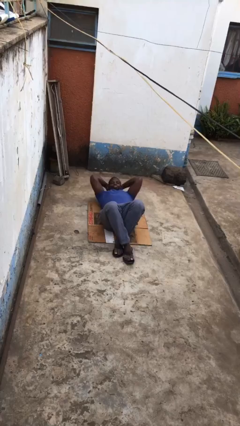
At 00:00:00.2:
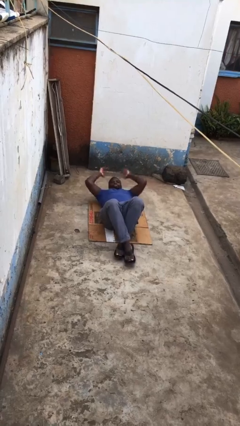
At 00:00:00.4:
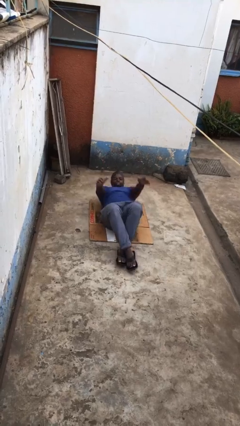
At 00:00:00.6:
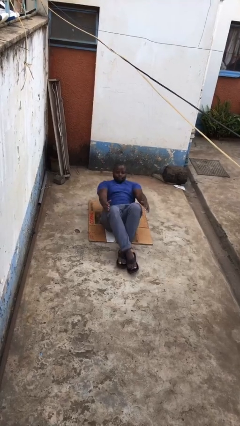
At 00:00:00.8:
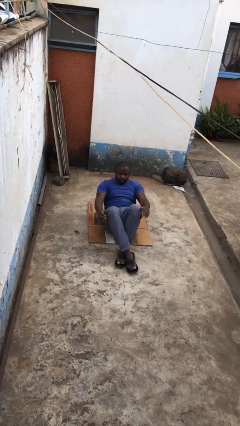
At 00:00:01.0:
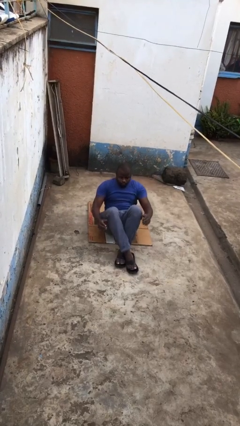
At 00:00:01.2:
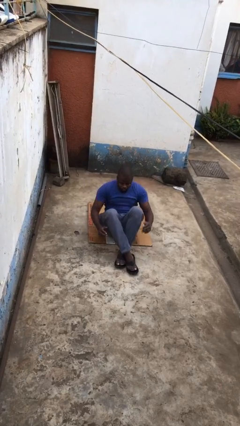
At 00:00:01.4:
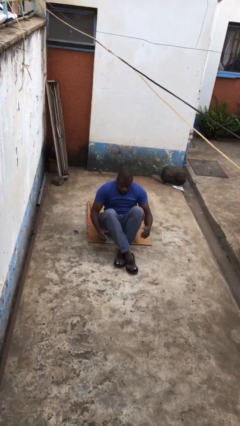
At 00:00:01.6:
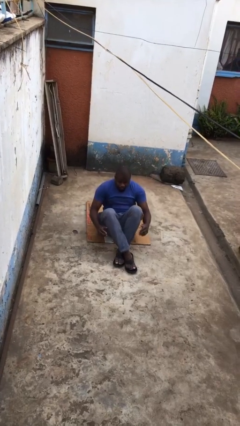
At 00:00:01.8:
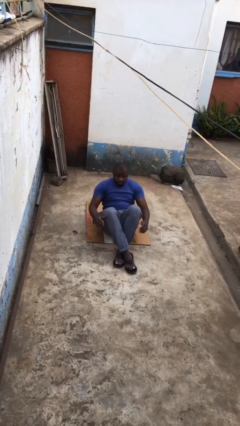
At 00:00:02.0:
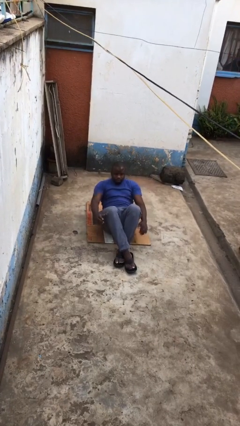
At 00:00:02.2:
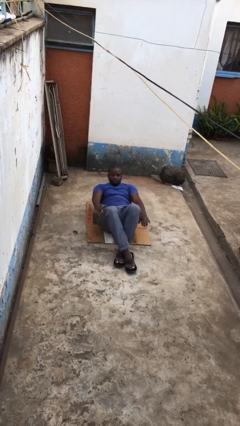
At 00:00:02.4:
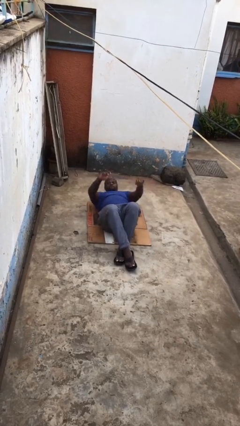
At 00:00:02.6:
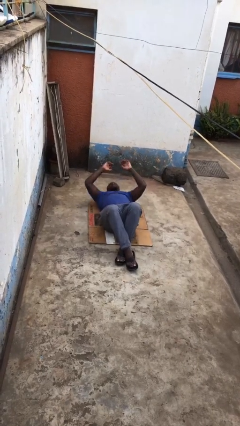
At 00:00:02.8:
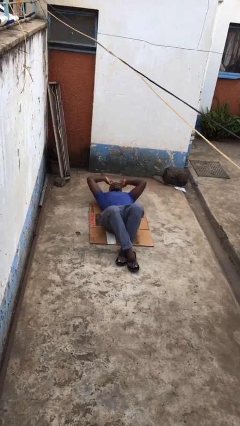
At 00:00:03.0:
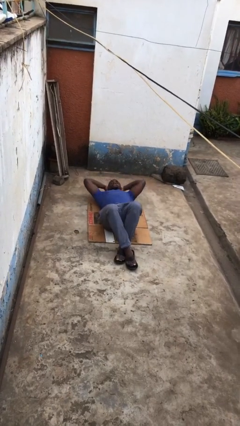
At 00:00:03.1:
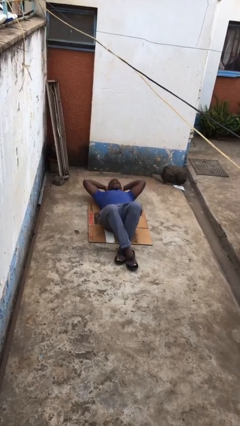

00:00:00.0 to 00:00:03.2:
person exercises with situp

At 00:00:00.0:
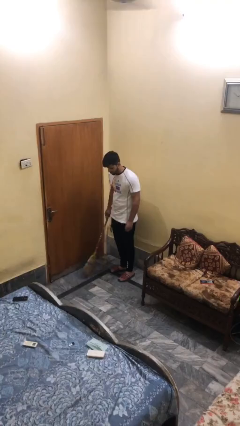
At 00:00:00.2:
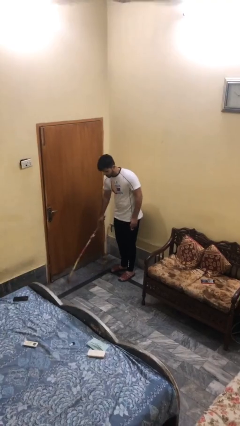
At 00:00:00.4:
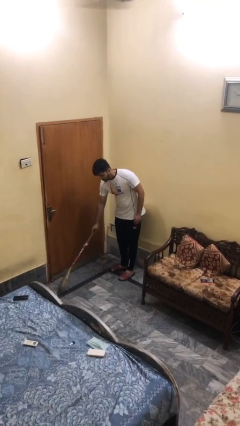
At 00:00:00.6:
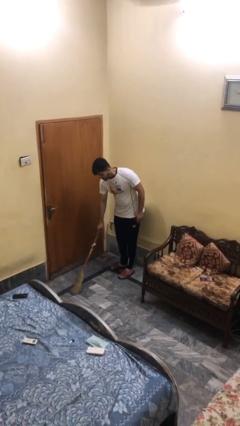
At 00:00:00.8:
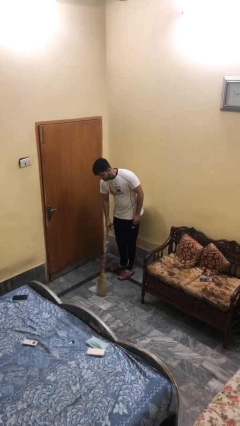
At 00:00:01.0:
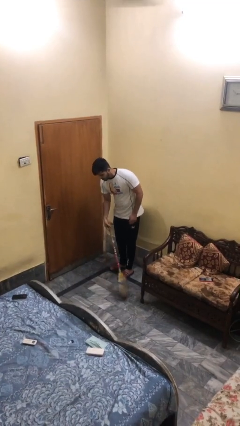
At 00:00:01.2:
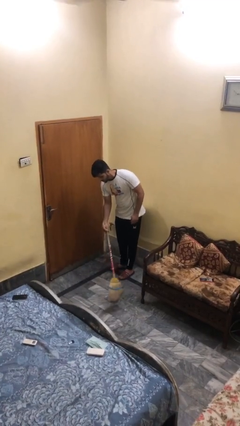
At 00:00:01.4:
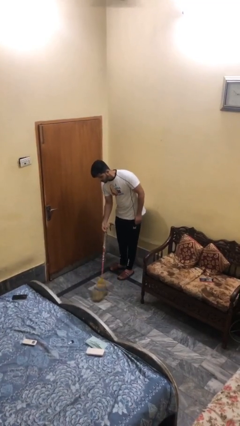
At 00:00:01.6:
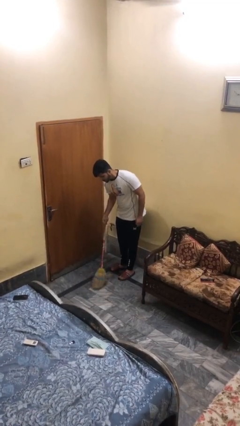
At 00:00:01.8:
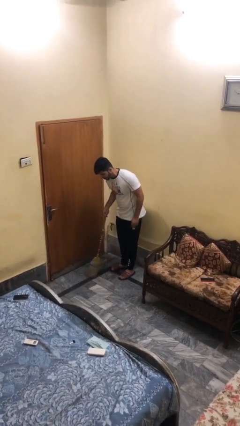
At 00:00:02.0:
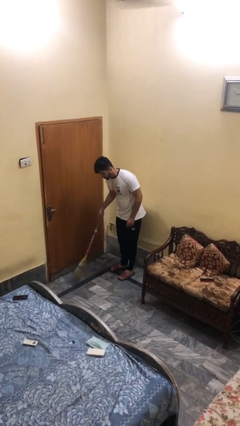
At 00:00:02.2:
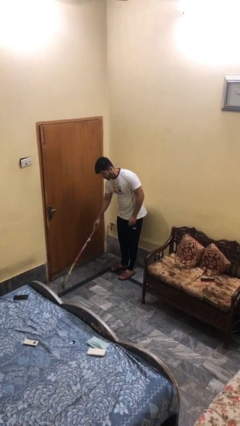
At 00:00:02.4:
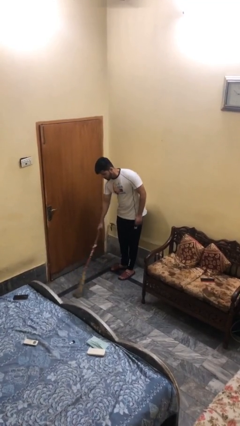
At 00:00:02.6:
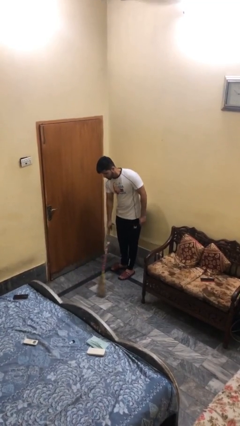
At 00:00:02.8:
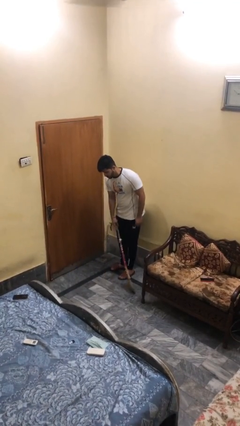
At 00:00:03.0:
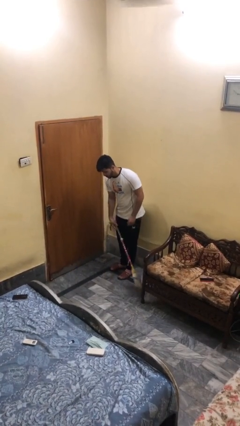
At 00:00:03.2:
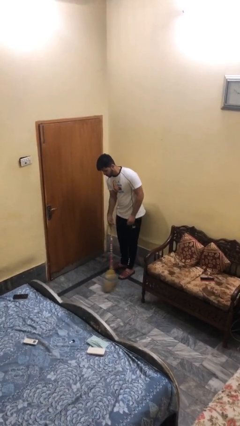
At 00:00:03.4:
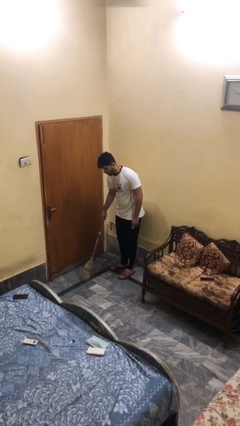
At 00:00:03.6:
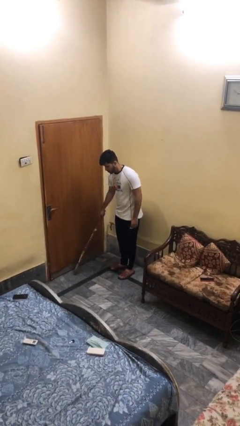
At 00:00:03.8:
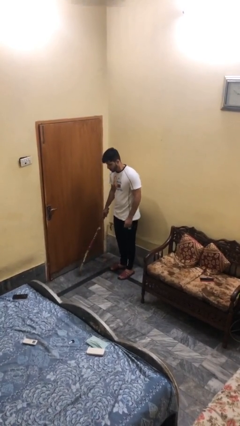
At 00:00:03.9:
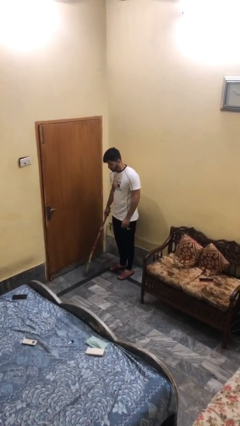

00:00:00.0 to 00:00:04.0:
person sweeps floor

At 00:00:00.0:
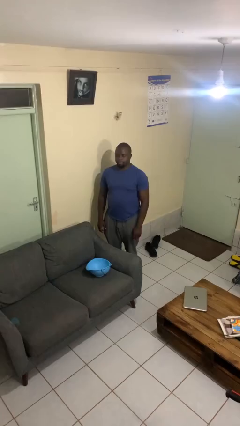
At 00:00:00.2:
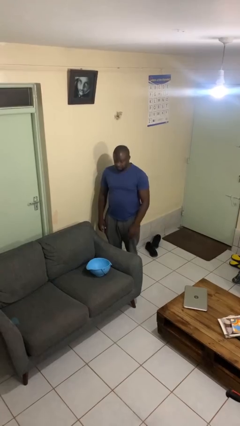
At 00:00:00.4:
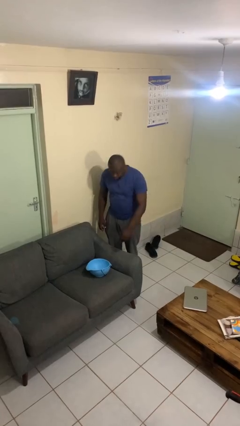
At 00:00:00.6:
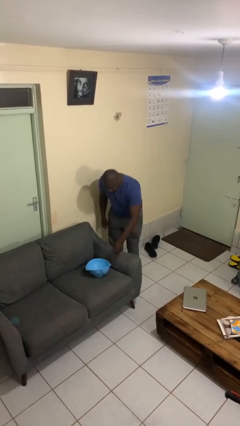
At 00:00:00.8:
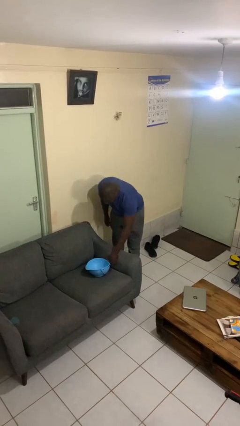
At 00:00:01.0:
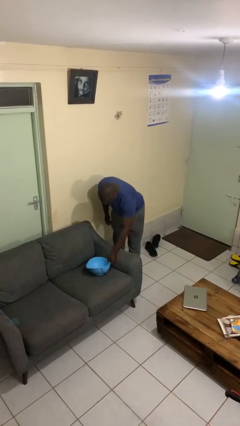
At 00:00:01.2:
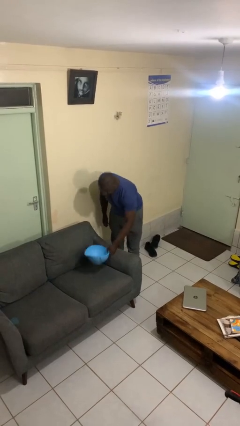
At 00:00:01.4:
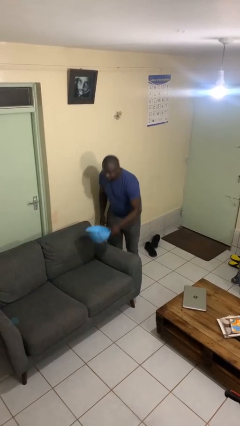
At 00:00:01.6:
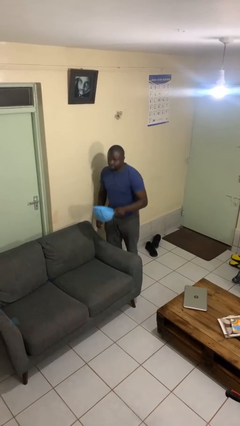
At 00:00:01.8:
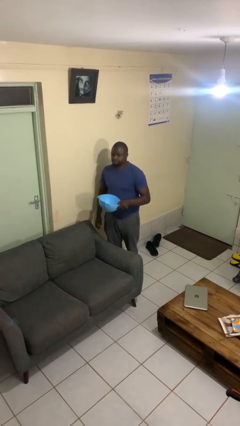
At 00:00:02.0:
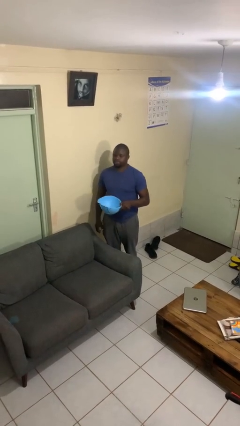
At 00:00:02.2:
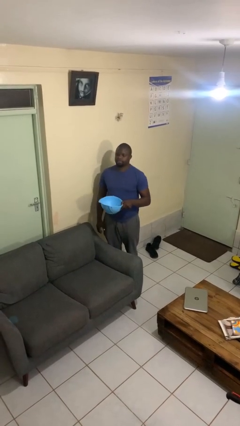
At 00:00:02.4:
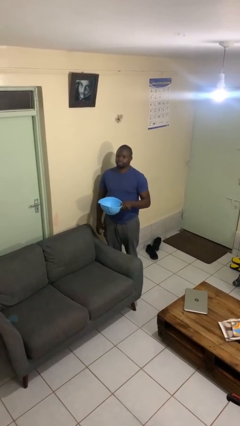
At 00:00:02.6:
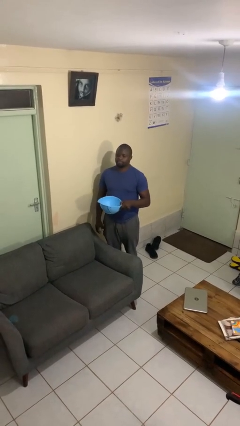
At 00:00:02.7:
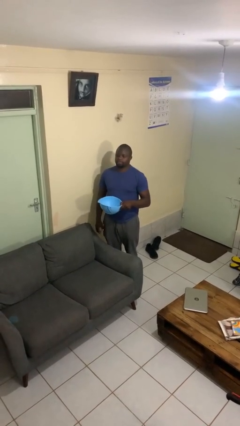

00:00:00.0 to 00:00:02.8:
person picks up object from couch

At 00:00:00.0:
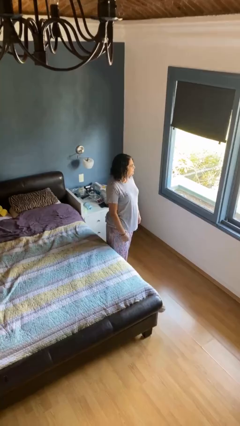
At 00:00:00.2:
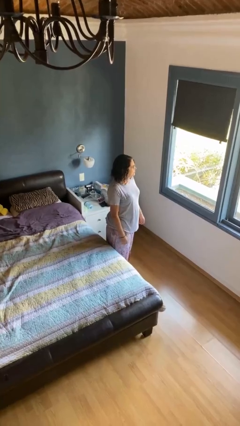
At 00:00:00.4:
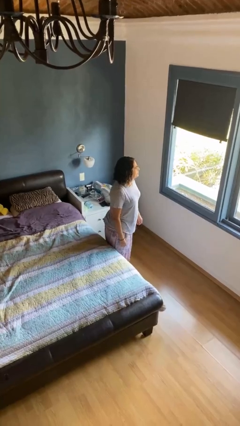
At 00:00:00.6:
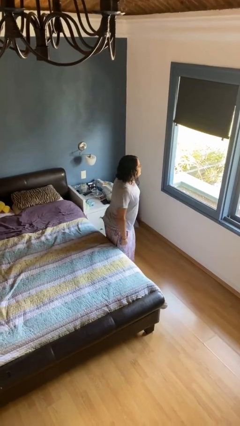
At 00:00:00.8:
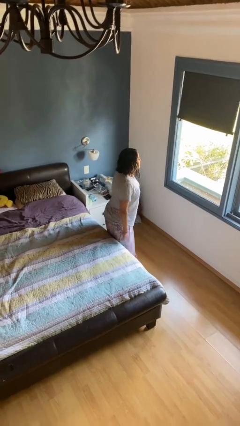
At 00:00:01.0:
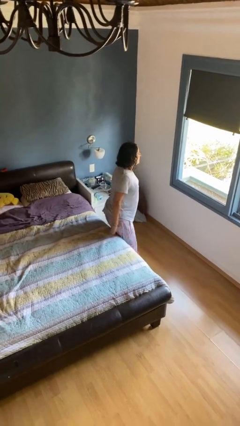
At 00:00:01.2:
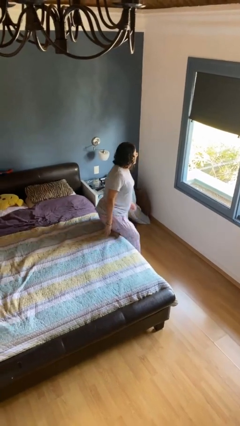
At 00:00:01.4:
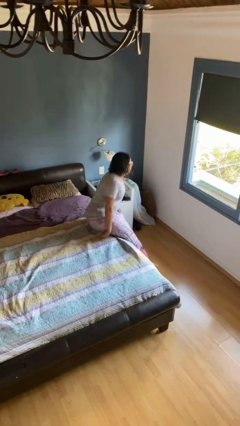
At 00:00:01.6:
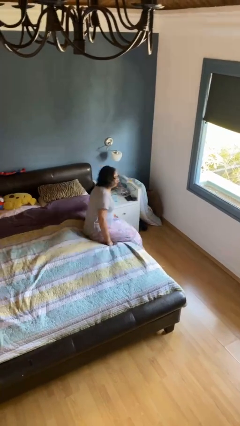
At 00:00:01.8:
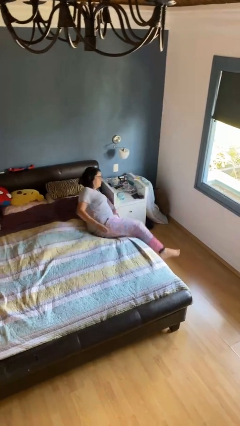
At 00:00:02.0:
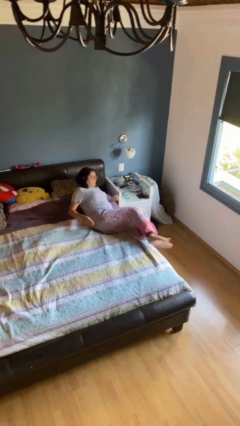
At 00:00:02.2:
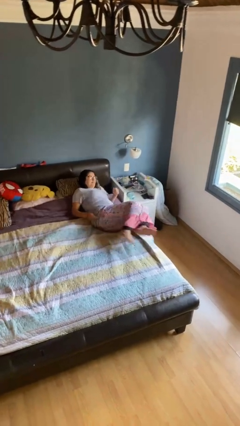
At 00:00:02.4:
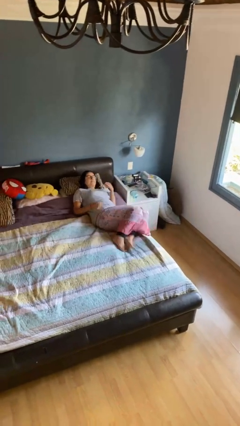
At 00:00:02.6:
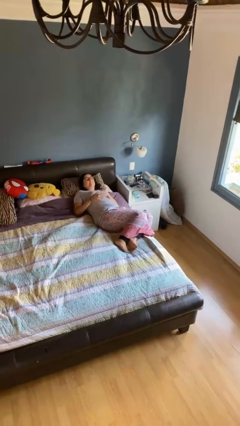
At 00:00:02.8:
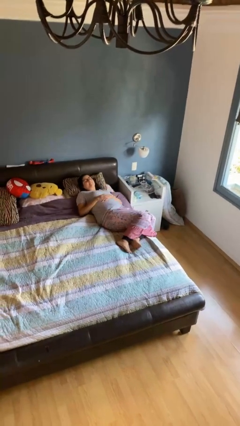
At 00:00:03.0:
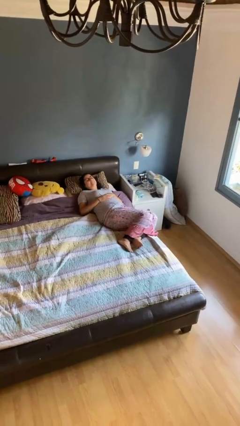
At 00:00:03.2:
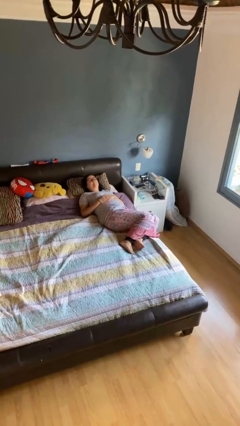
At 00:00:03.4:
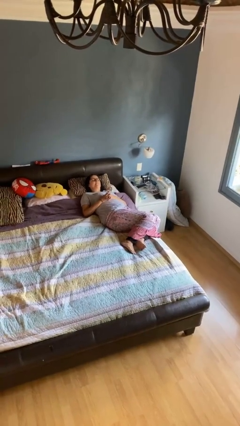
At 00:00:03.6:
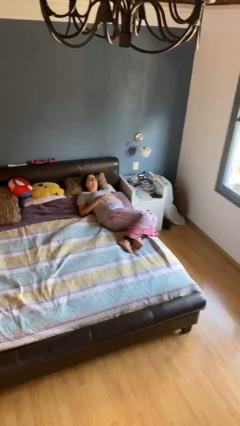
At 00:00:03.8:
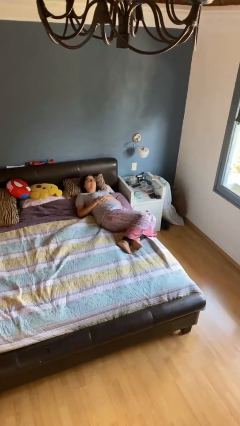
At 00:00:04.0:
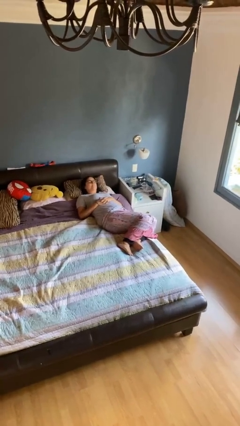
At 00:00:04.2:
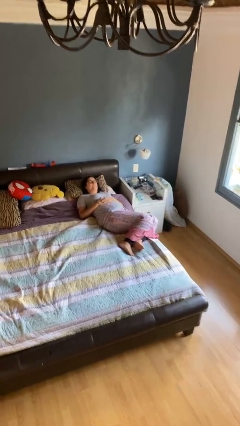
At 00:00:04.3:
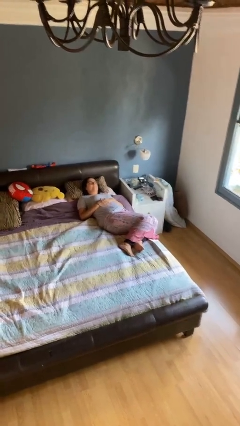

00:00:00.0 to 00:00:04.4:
person lies down on bed

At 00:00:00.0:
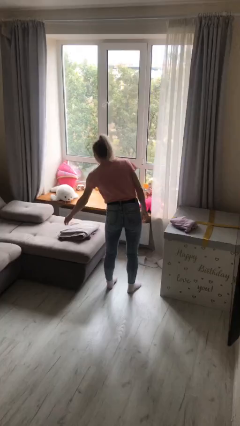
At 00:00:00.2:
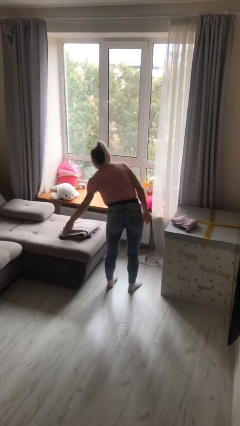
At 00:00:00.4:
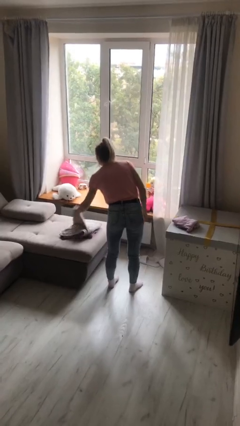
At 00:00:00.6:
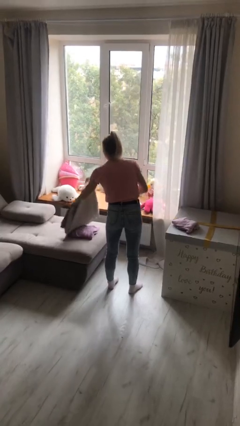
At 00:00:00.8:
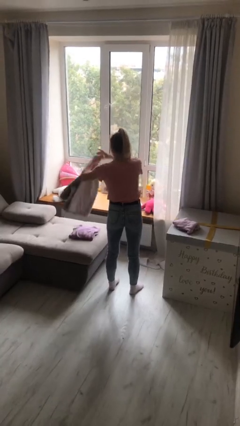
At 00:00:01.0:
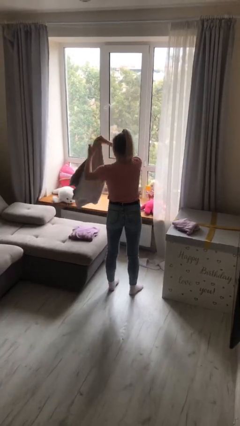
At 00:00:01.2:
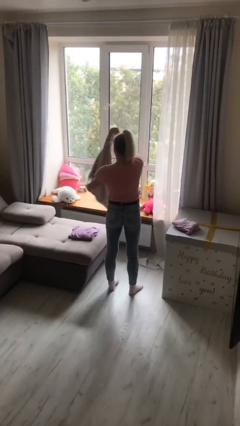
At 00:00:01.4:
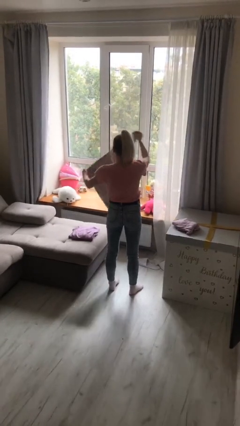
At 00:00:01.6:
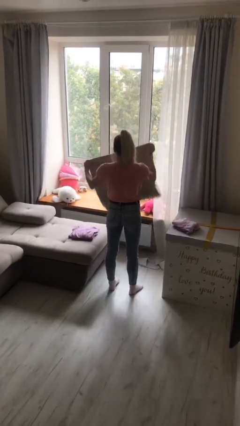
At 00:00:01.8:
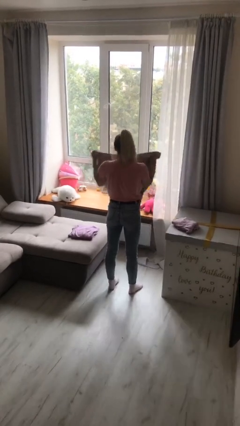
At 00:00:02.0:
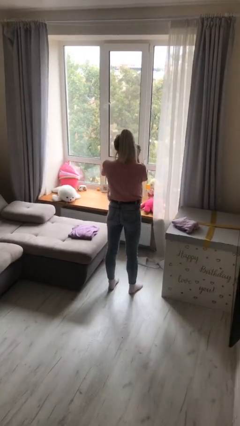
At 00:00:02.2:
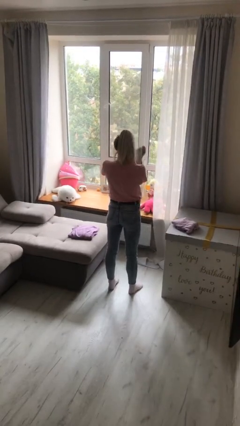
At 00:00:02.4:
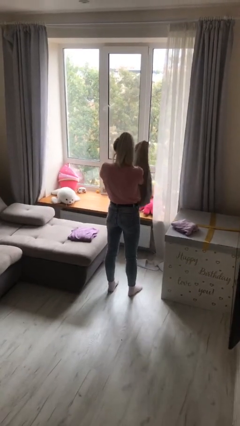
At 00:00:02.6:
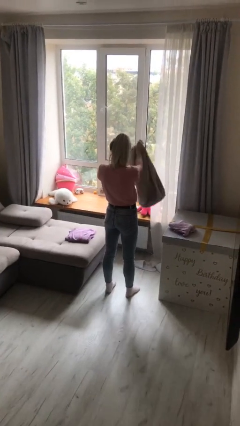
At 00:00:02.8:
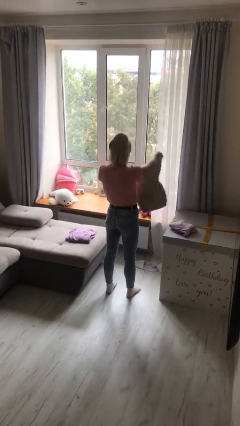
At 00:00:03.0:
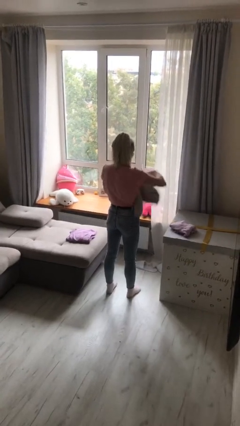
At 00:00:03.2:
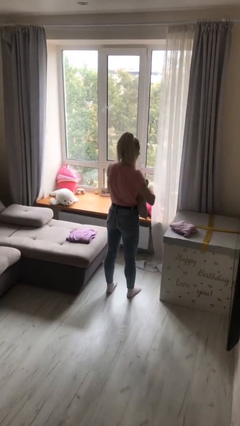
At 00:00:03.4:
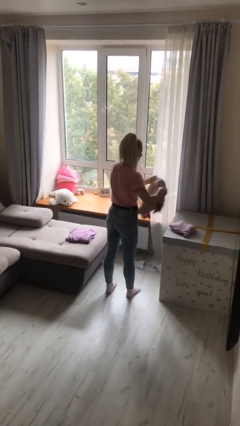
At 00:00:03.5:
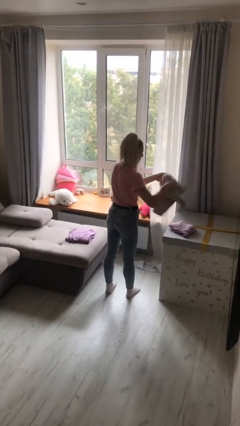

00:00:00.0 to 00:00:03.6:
person folds towel
